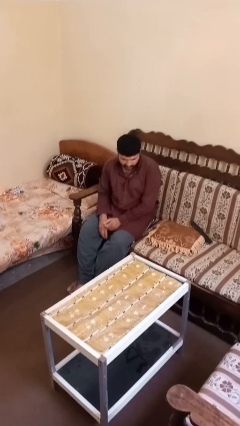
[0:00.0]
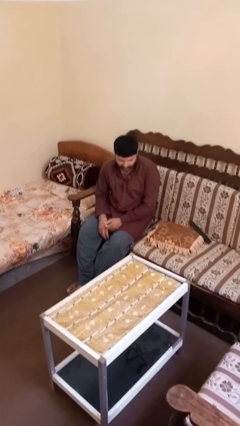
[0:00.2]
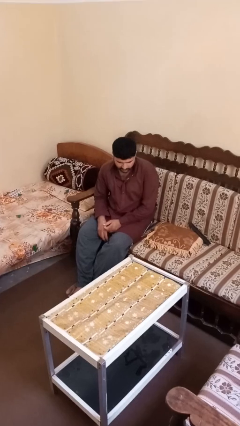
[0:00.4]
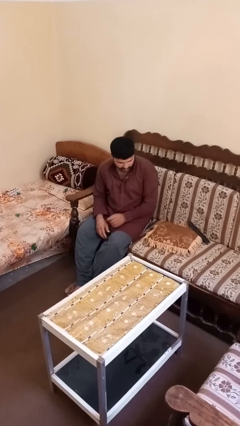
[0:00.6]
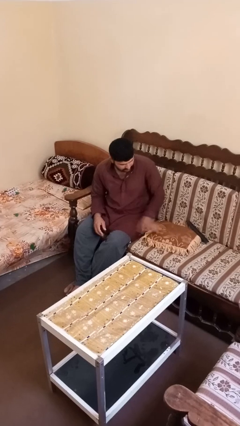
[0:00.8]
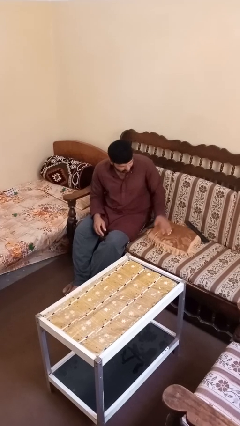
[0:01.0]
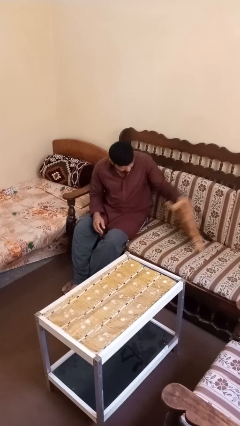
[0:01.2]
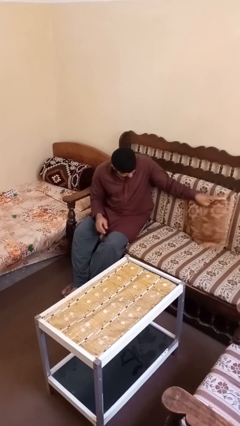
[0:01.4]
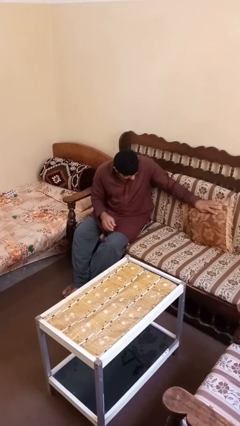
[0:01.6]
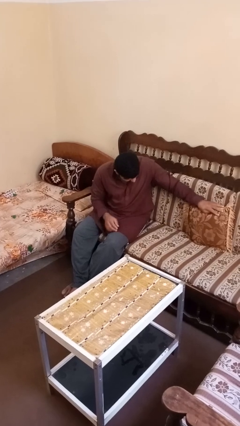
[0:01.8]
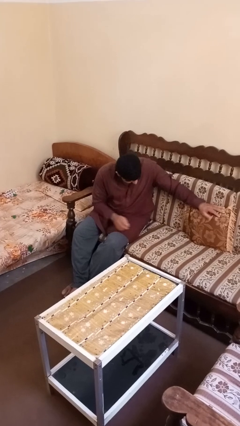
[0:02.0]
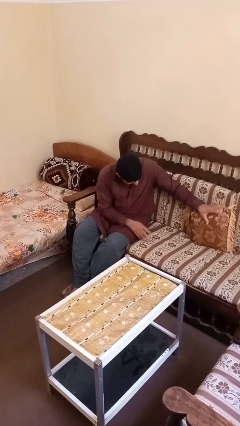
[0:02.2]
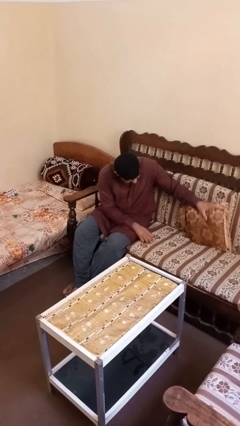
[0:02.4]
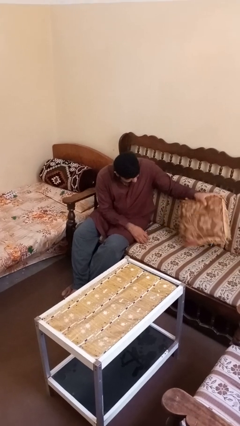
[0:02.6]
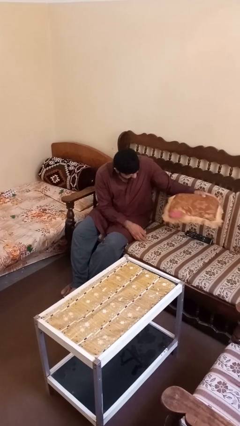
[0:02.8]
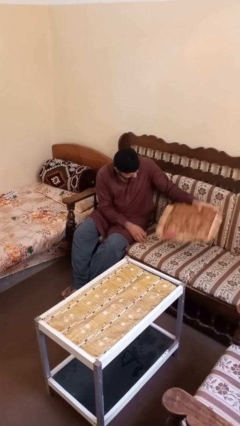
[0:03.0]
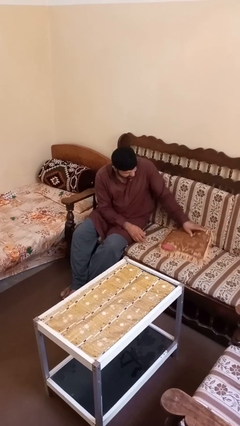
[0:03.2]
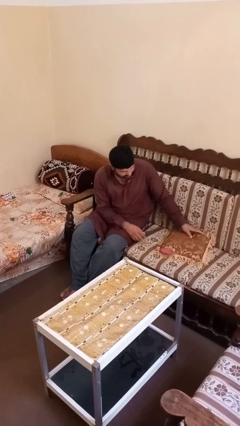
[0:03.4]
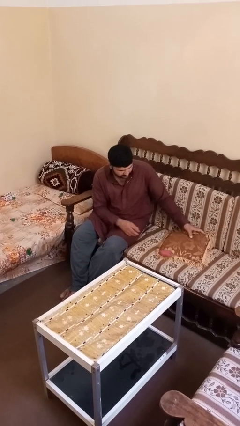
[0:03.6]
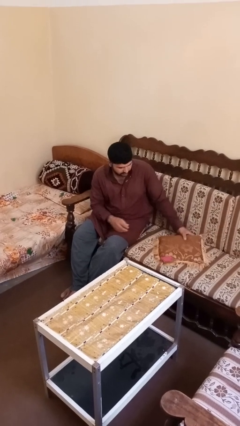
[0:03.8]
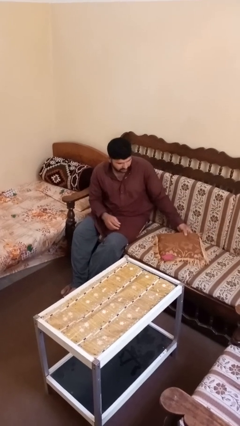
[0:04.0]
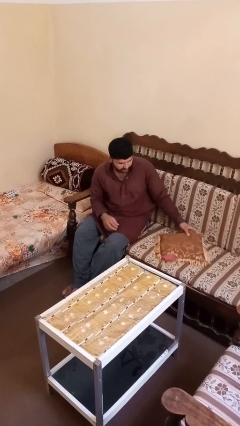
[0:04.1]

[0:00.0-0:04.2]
person searches in couch

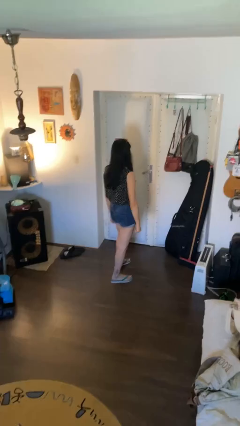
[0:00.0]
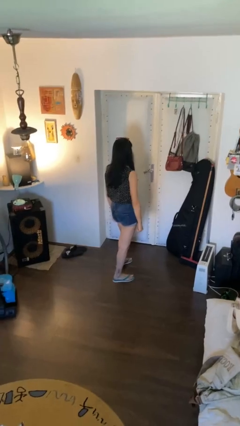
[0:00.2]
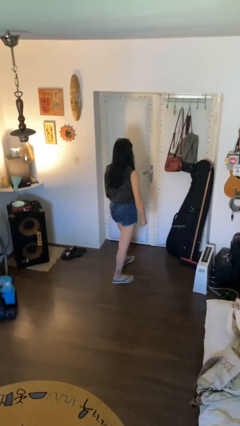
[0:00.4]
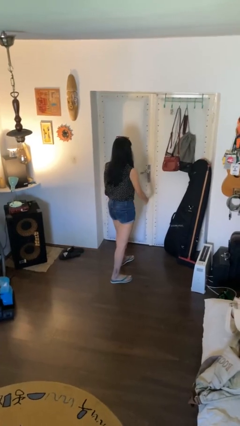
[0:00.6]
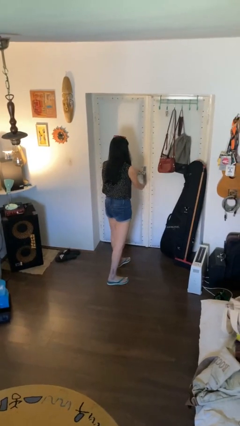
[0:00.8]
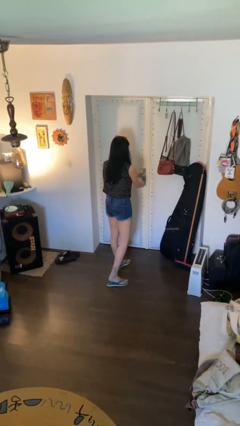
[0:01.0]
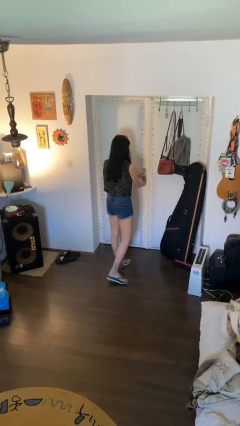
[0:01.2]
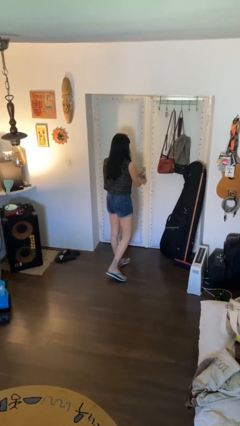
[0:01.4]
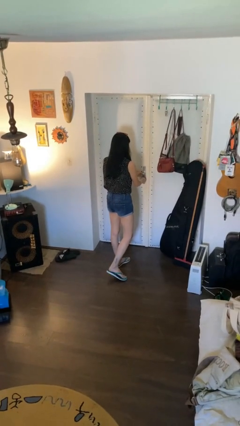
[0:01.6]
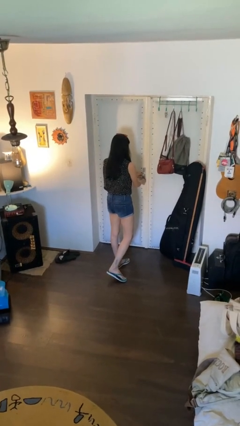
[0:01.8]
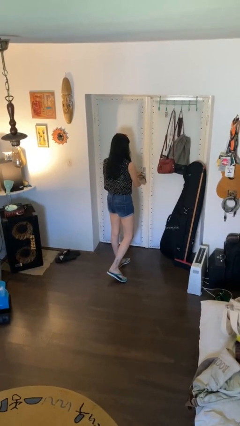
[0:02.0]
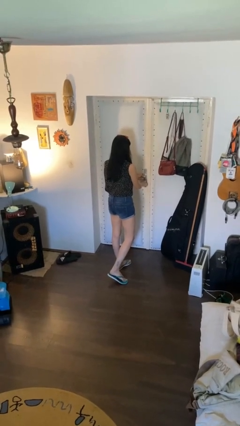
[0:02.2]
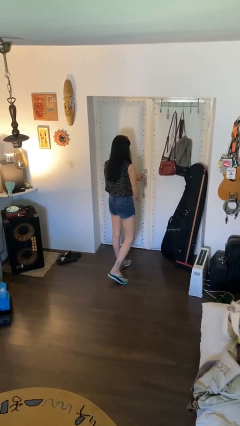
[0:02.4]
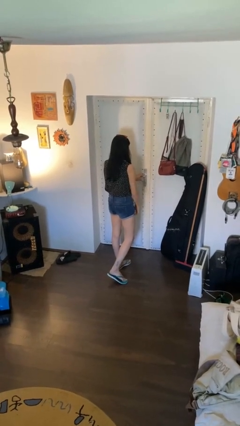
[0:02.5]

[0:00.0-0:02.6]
person unlocks door with keys

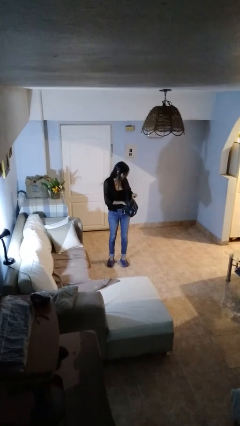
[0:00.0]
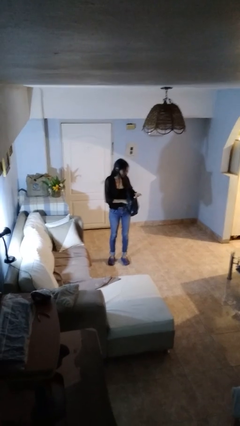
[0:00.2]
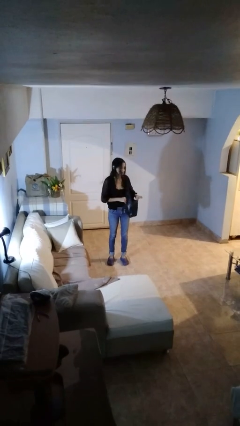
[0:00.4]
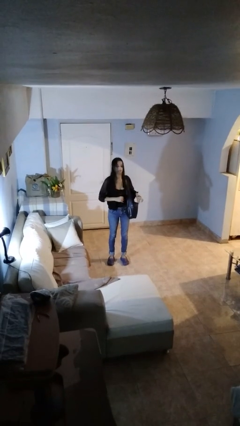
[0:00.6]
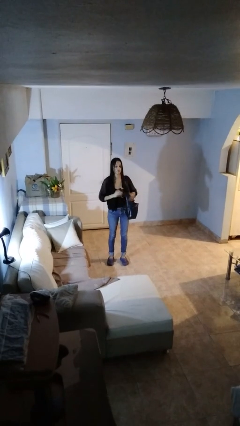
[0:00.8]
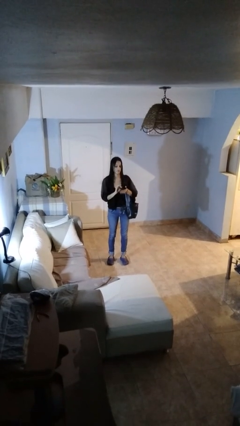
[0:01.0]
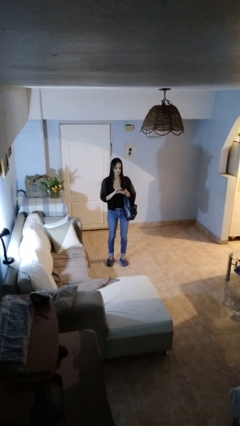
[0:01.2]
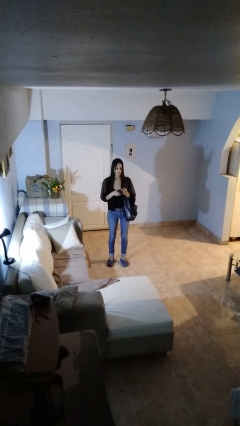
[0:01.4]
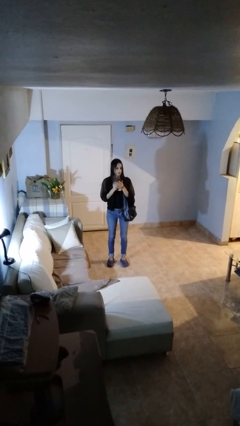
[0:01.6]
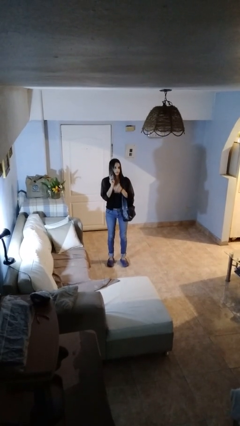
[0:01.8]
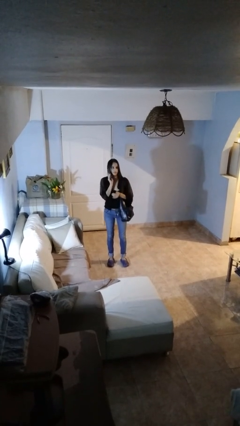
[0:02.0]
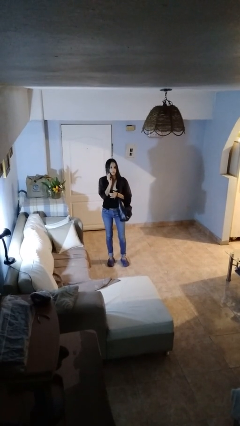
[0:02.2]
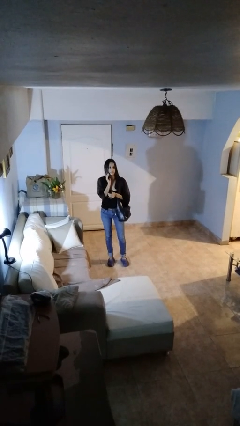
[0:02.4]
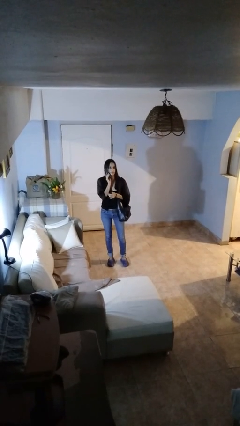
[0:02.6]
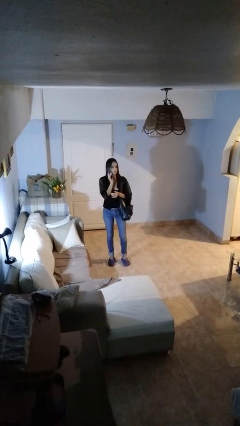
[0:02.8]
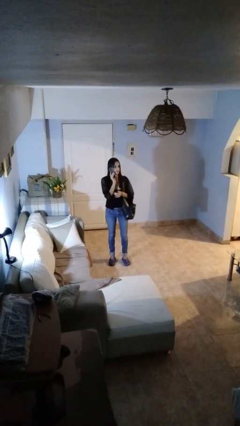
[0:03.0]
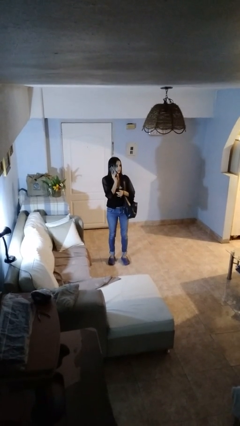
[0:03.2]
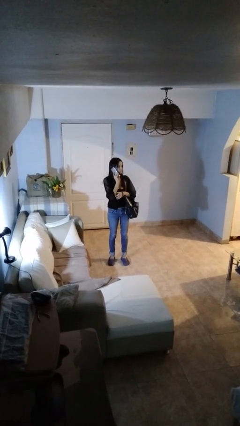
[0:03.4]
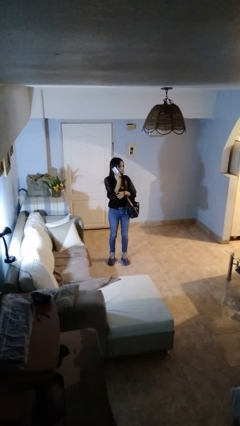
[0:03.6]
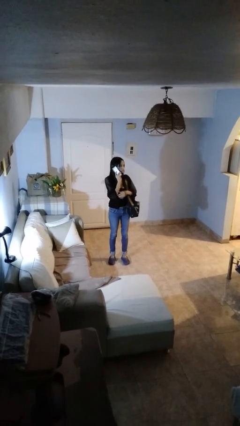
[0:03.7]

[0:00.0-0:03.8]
person takes object from purse

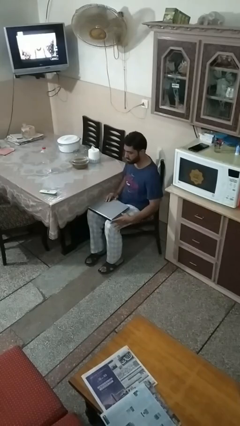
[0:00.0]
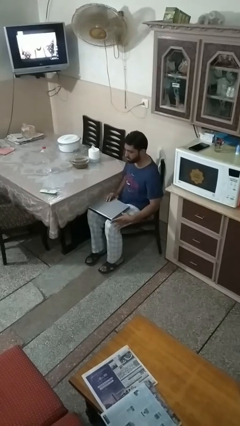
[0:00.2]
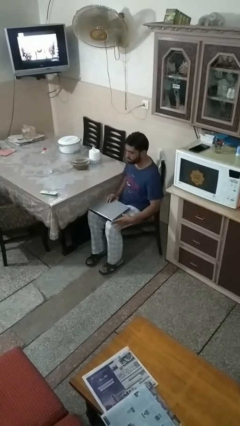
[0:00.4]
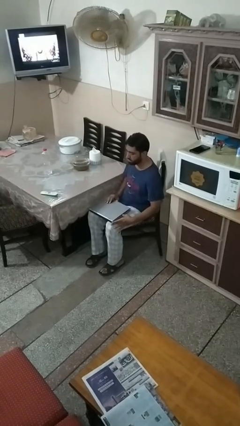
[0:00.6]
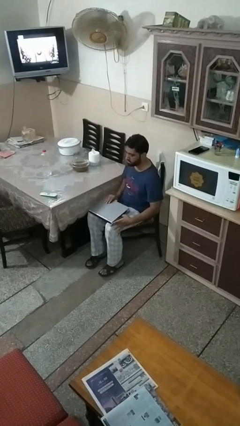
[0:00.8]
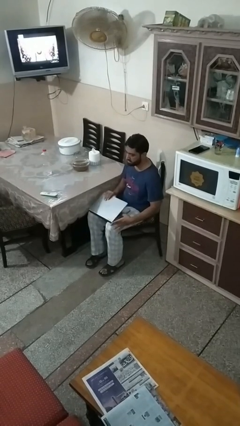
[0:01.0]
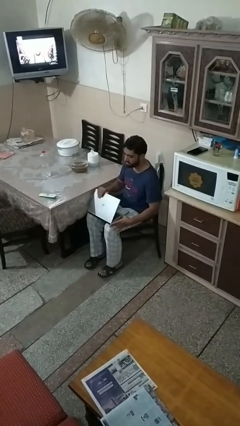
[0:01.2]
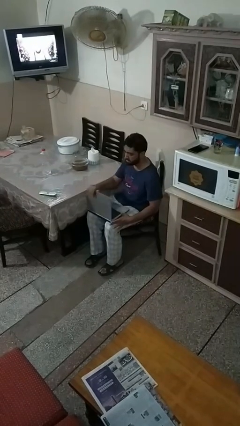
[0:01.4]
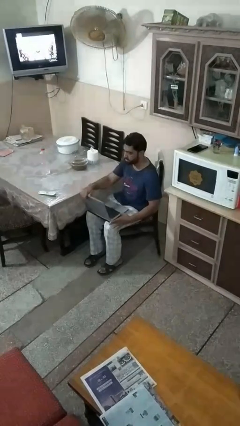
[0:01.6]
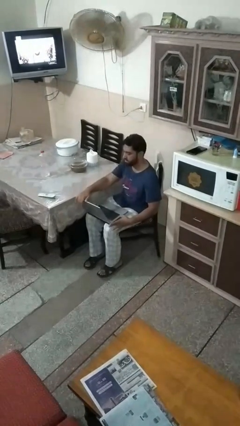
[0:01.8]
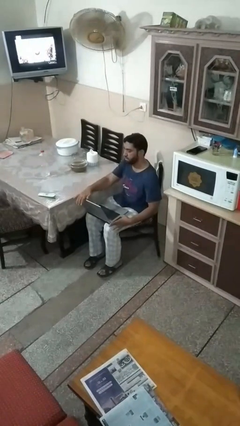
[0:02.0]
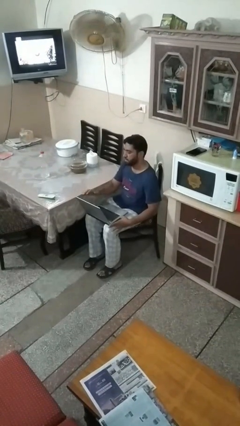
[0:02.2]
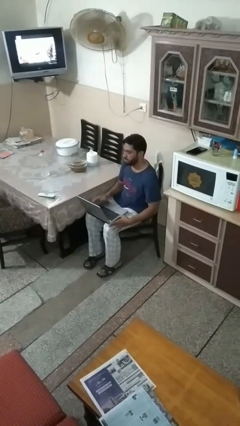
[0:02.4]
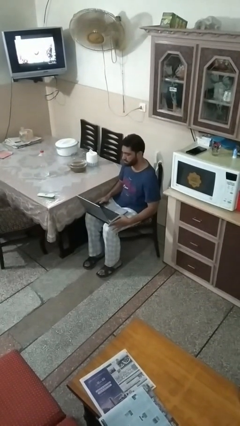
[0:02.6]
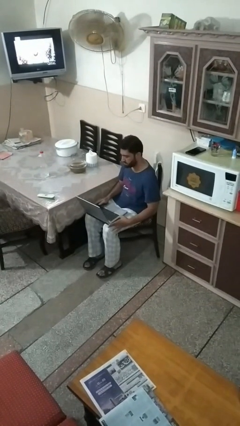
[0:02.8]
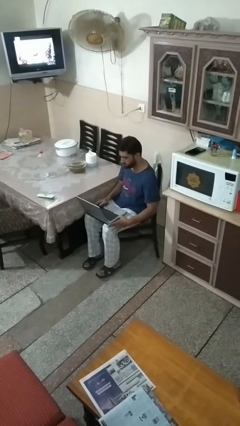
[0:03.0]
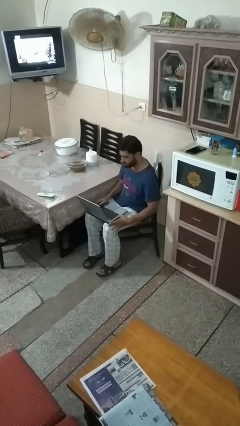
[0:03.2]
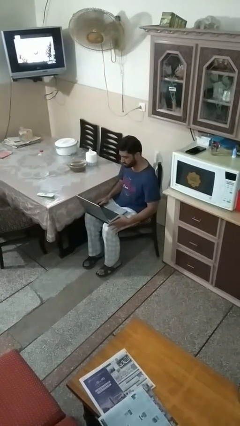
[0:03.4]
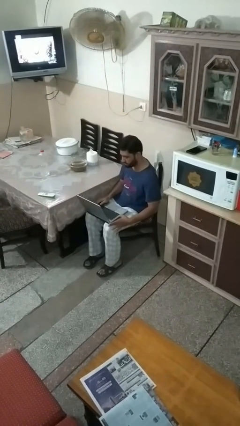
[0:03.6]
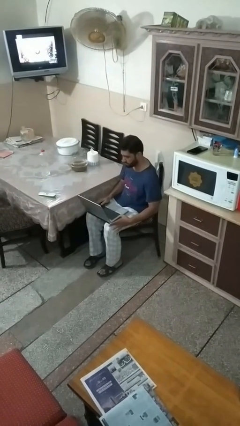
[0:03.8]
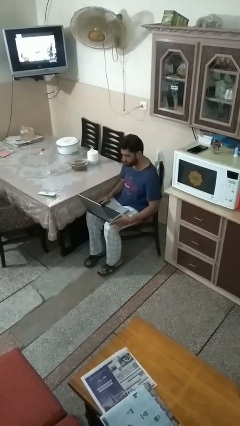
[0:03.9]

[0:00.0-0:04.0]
person opens laptop

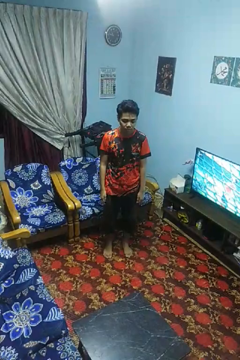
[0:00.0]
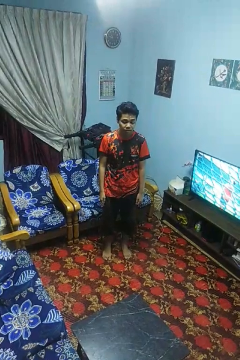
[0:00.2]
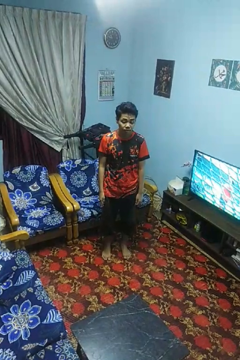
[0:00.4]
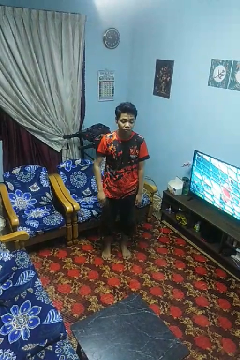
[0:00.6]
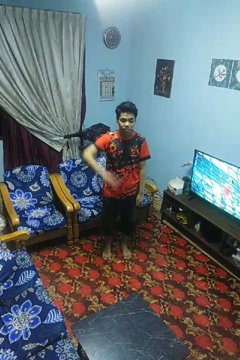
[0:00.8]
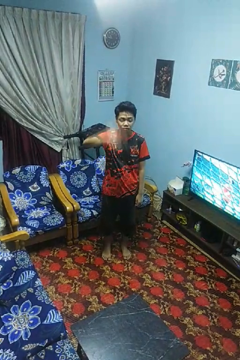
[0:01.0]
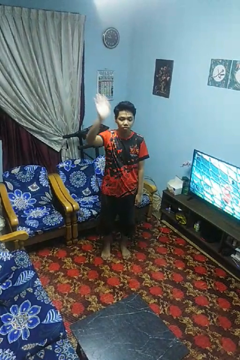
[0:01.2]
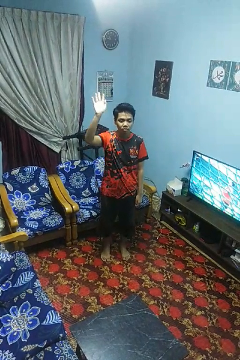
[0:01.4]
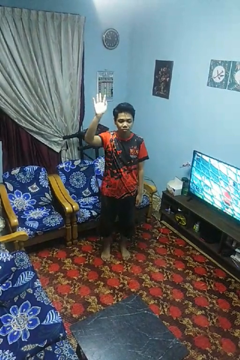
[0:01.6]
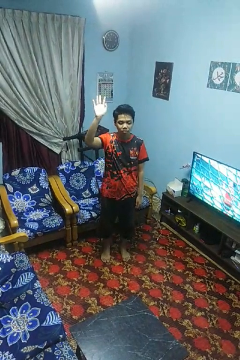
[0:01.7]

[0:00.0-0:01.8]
person gestures swipe up

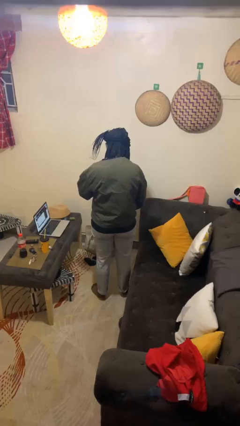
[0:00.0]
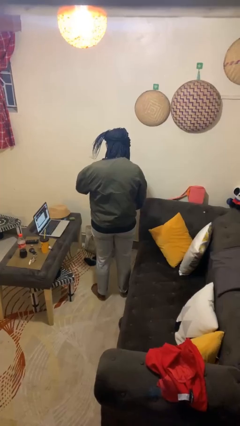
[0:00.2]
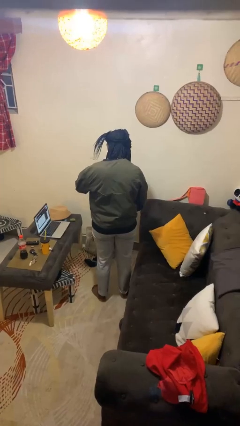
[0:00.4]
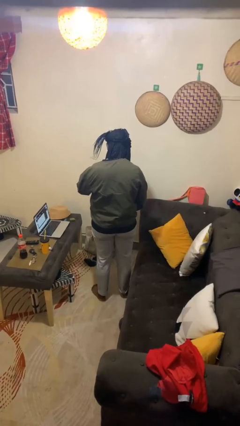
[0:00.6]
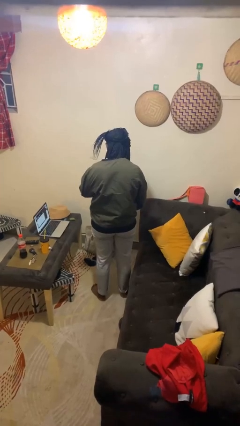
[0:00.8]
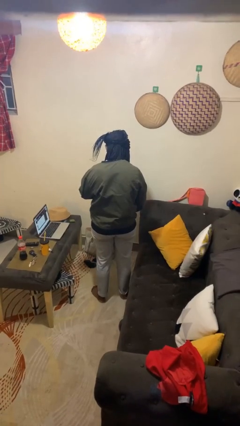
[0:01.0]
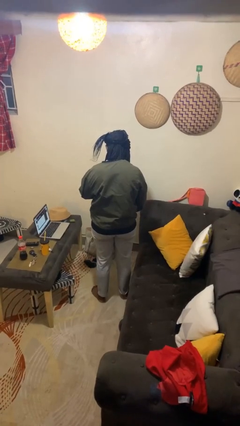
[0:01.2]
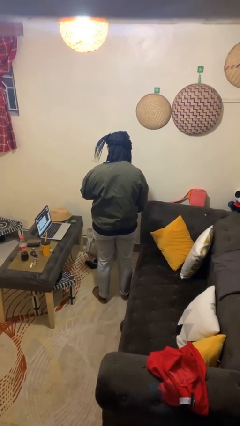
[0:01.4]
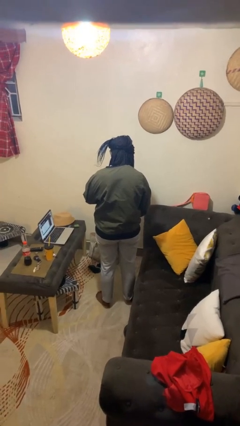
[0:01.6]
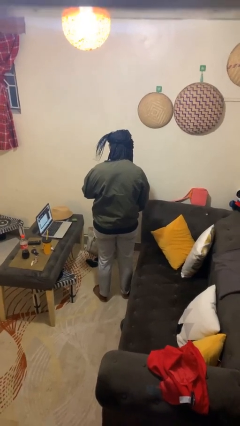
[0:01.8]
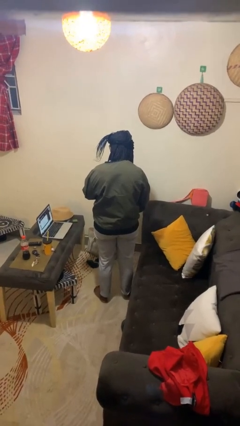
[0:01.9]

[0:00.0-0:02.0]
person zips up jacket
